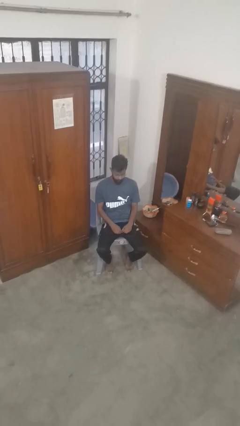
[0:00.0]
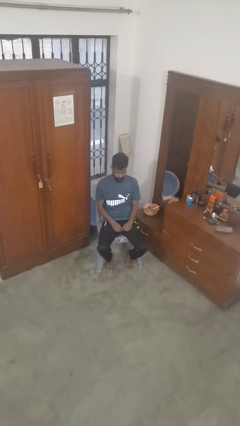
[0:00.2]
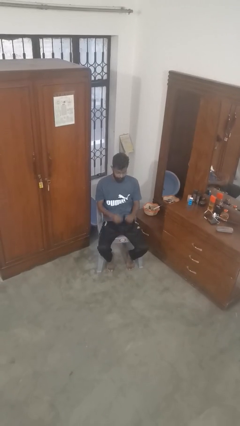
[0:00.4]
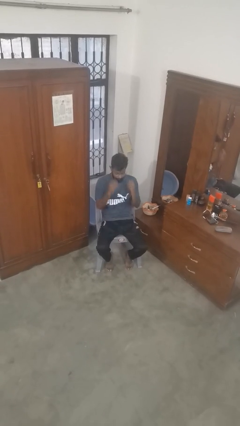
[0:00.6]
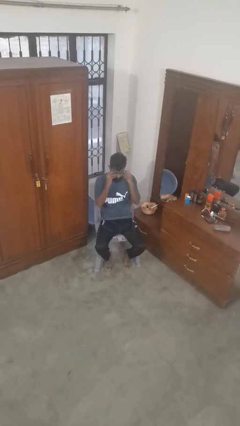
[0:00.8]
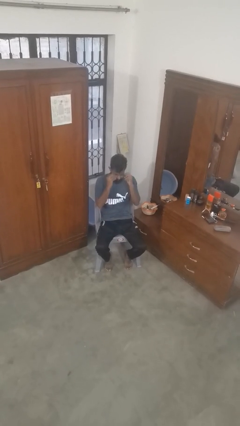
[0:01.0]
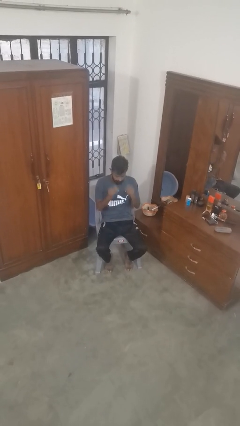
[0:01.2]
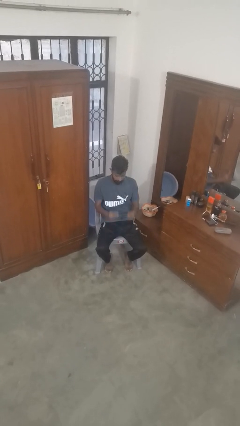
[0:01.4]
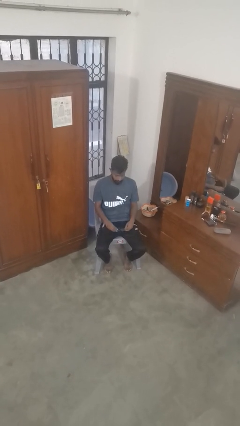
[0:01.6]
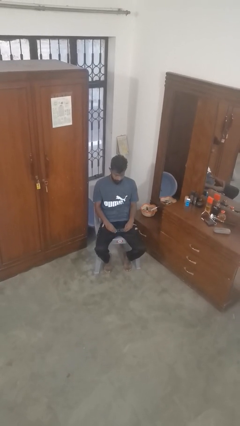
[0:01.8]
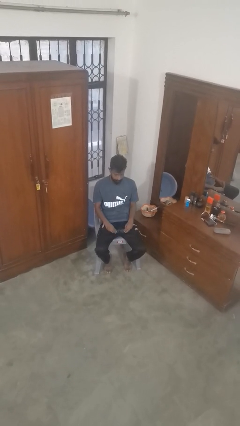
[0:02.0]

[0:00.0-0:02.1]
person takes off glasses

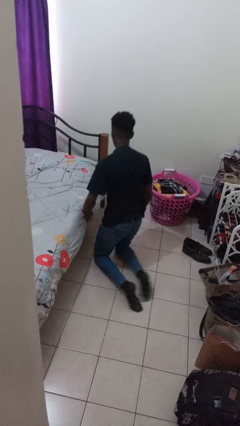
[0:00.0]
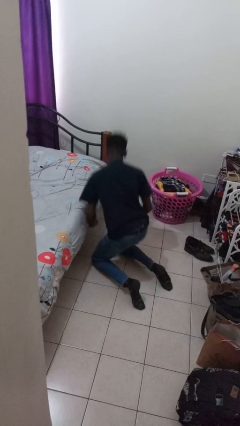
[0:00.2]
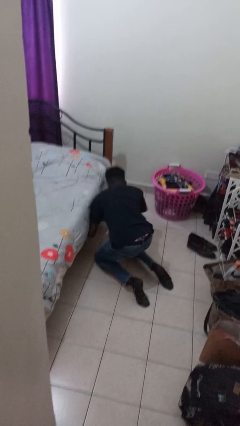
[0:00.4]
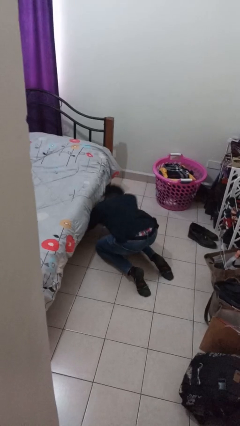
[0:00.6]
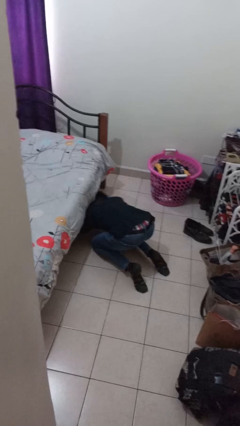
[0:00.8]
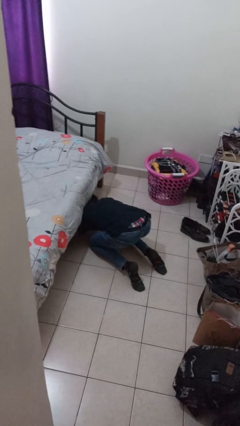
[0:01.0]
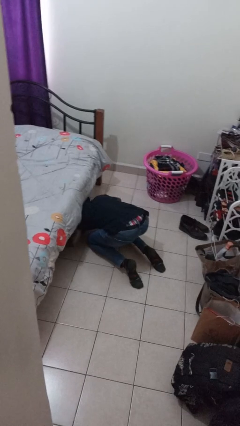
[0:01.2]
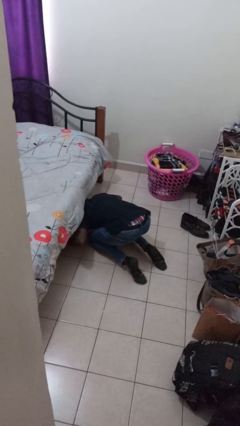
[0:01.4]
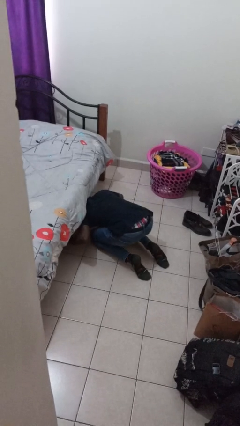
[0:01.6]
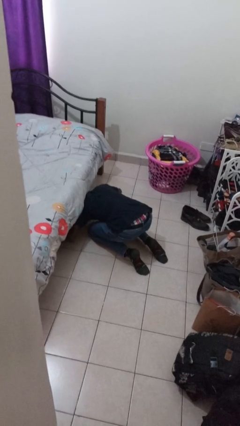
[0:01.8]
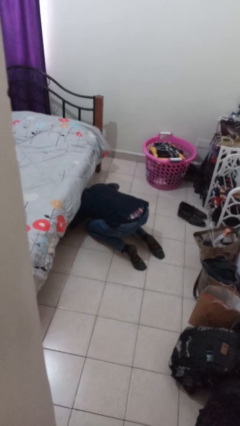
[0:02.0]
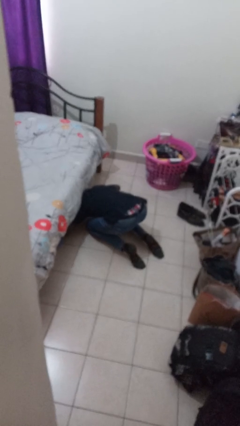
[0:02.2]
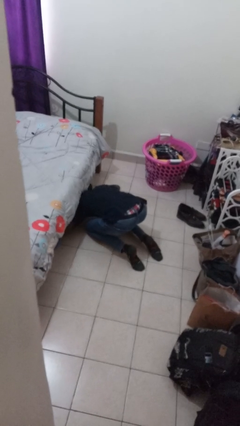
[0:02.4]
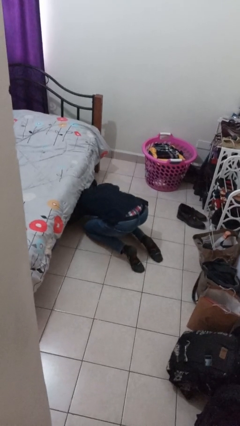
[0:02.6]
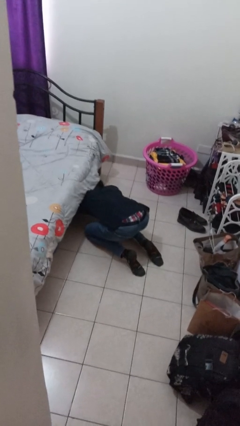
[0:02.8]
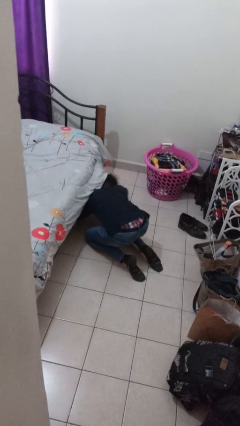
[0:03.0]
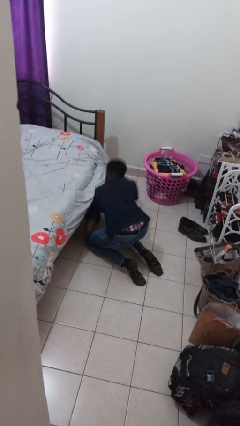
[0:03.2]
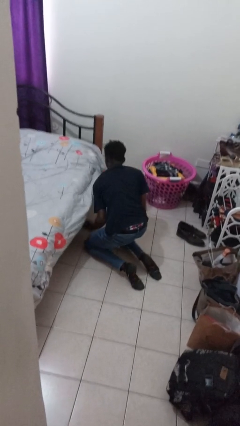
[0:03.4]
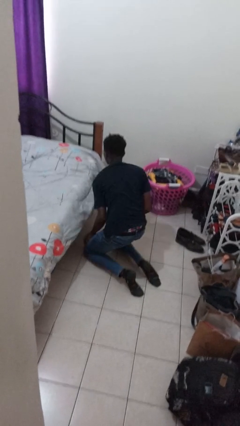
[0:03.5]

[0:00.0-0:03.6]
person searches under bed

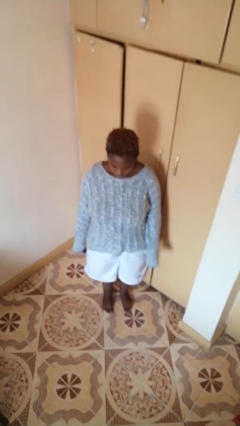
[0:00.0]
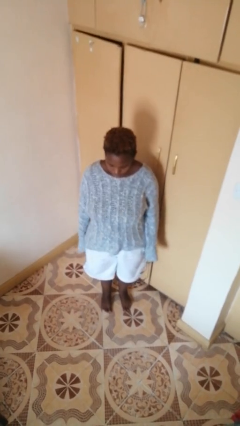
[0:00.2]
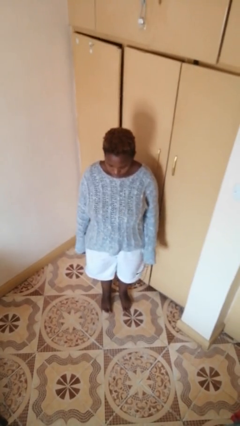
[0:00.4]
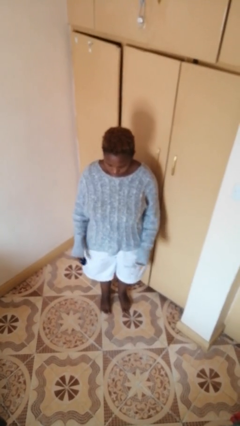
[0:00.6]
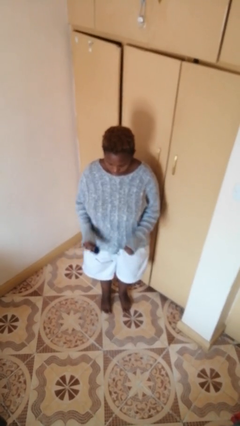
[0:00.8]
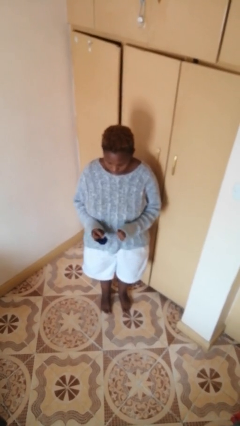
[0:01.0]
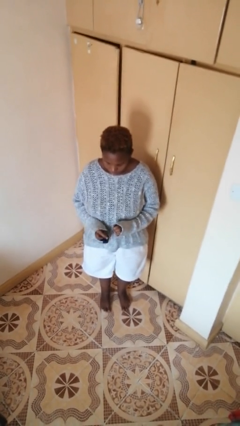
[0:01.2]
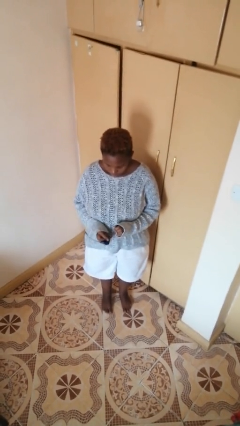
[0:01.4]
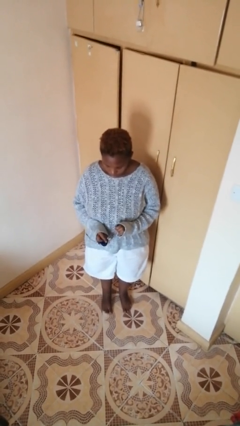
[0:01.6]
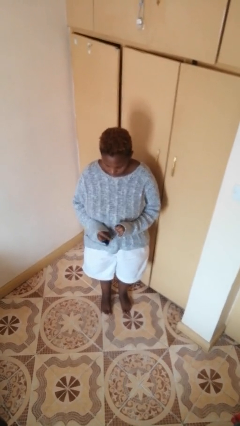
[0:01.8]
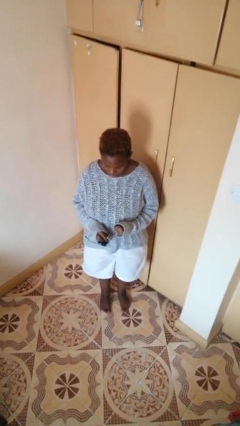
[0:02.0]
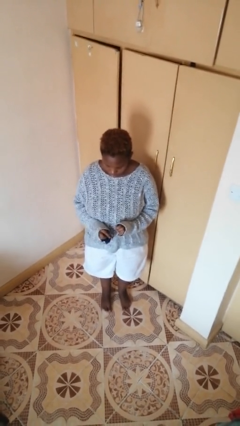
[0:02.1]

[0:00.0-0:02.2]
person cleans eyeglasses

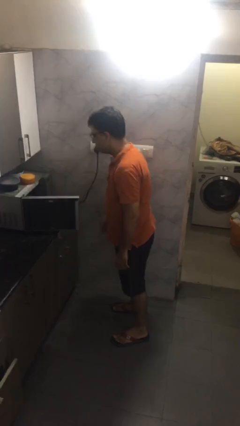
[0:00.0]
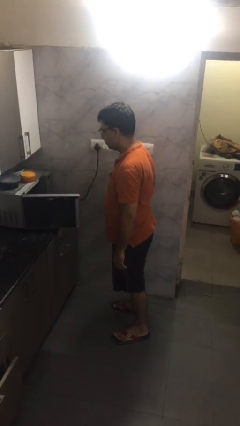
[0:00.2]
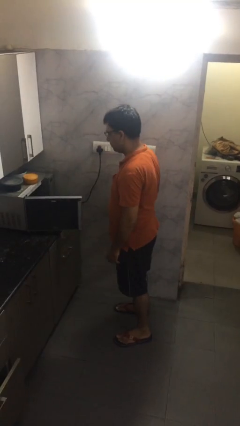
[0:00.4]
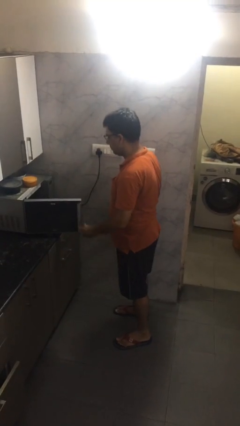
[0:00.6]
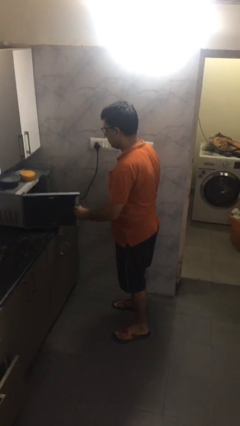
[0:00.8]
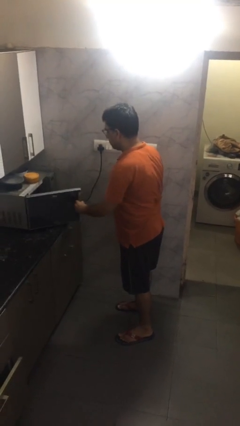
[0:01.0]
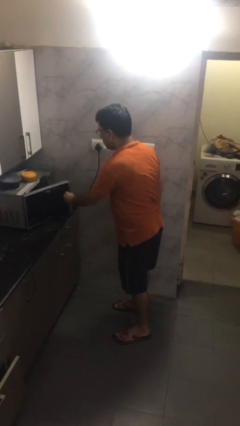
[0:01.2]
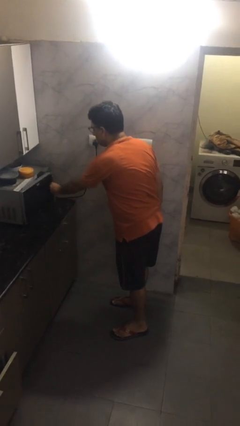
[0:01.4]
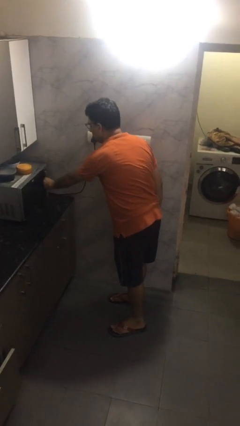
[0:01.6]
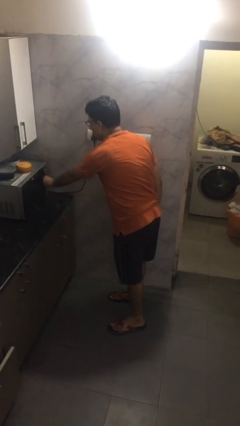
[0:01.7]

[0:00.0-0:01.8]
person closes microwave

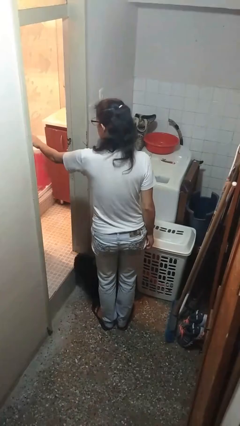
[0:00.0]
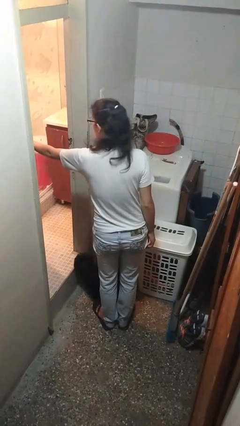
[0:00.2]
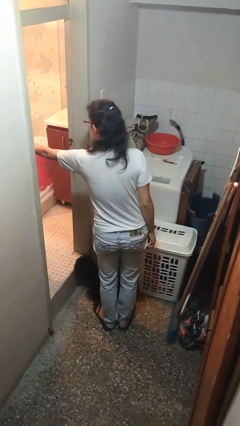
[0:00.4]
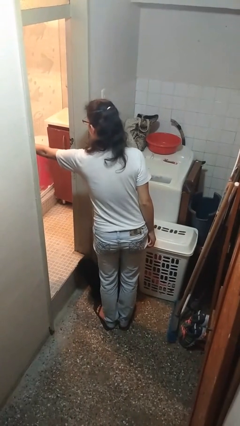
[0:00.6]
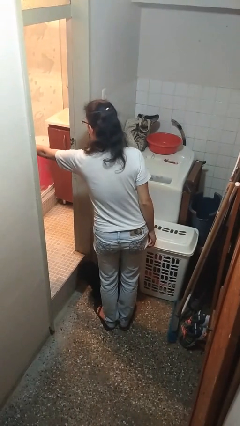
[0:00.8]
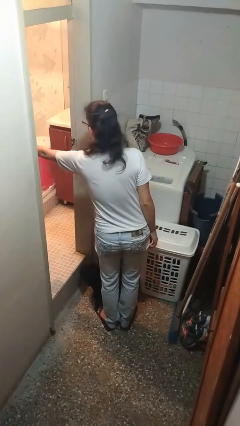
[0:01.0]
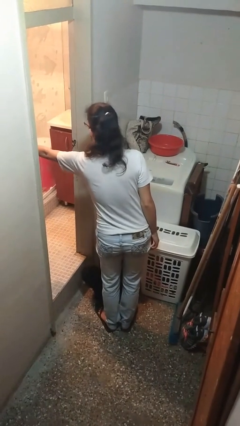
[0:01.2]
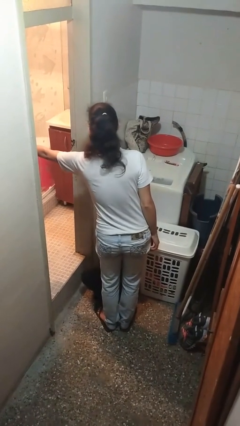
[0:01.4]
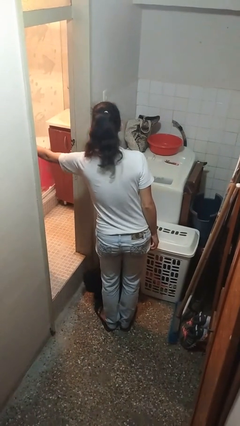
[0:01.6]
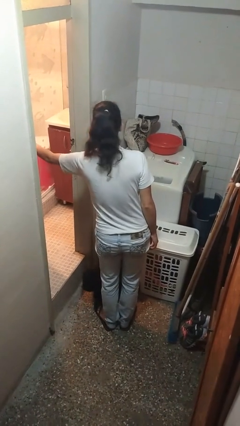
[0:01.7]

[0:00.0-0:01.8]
person opens facility door

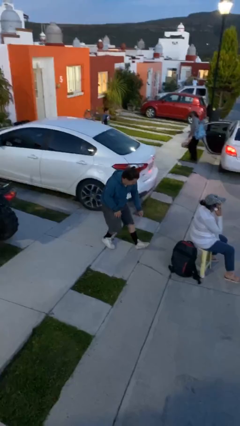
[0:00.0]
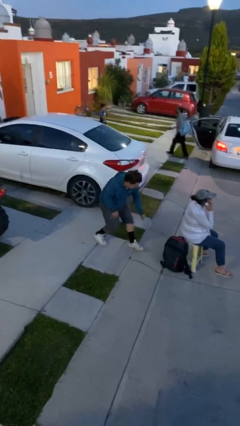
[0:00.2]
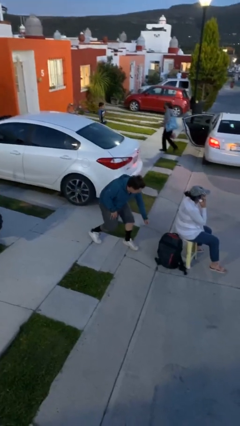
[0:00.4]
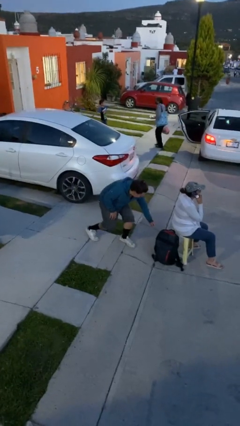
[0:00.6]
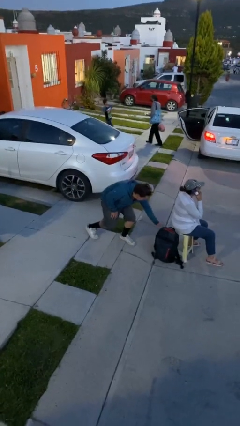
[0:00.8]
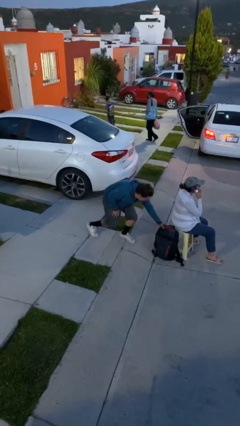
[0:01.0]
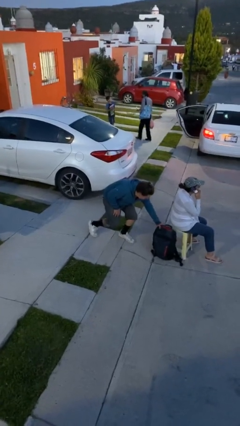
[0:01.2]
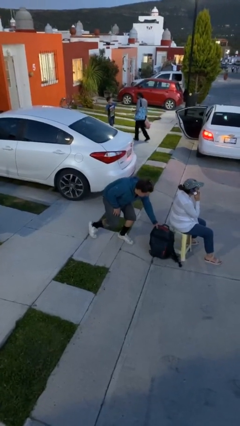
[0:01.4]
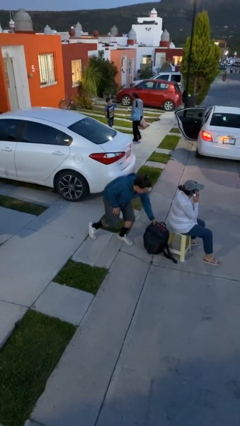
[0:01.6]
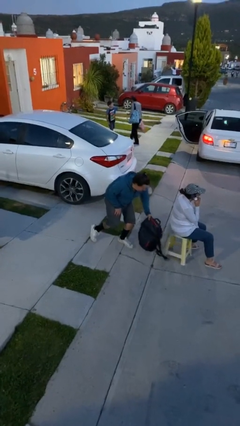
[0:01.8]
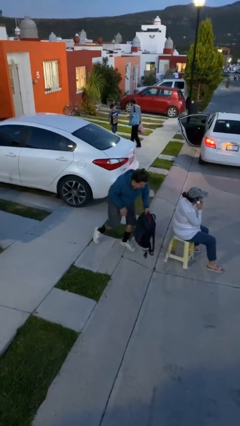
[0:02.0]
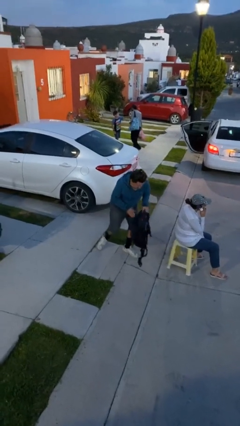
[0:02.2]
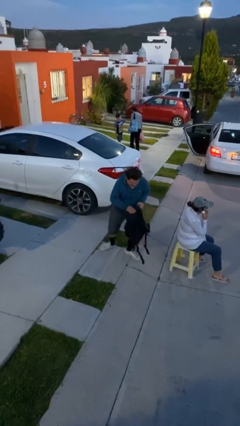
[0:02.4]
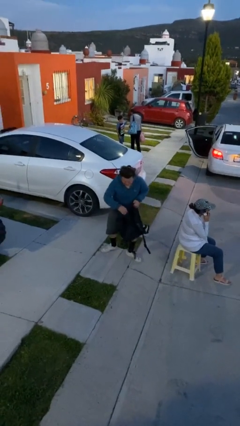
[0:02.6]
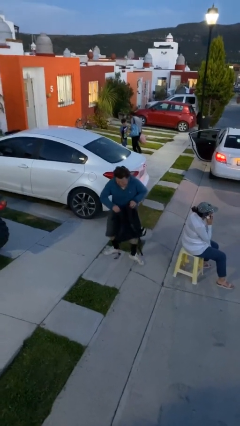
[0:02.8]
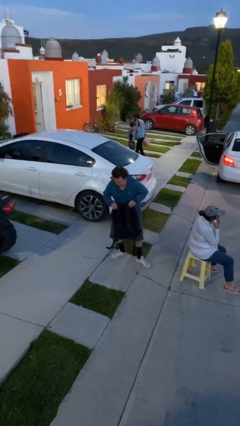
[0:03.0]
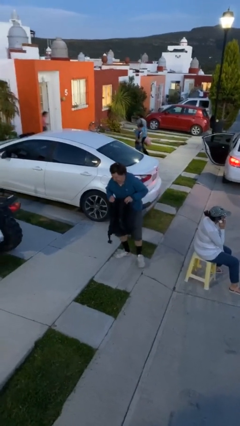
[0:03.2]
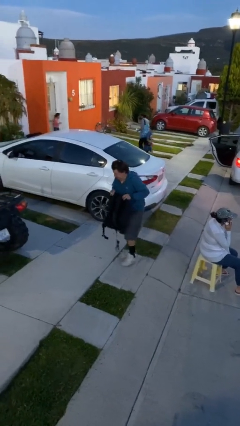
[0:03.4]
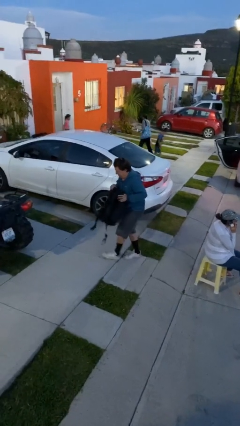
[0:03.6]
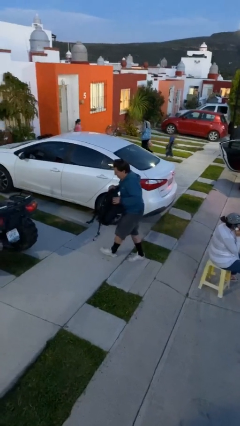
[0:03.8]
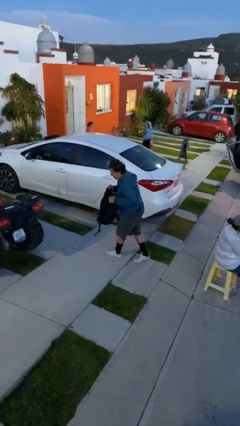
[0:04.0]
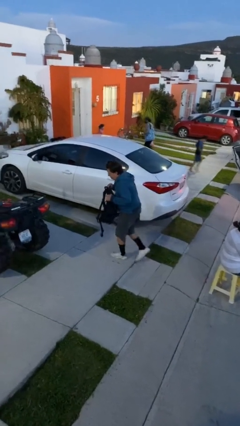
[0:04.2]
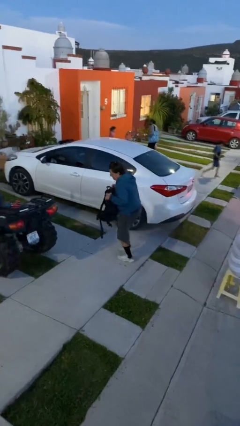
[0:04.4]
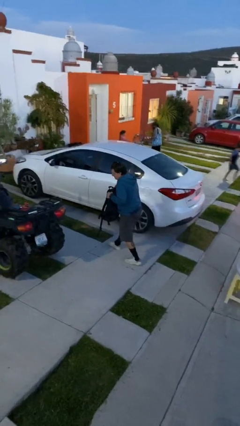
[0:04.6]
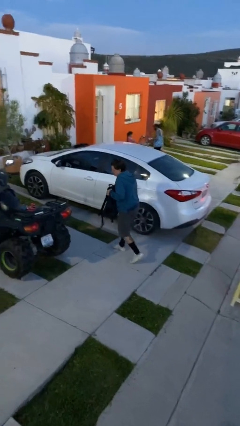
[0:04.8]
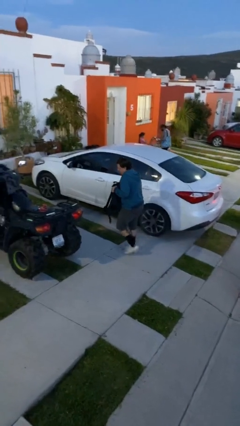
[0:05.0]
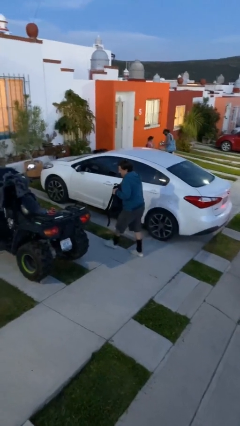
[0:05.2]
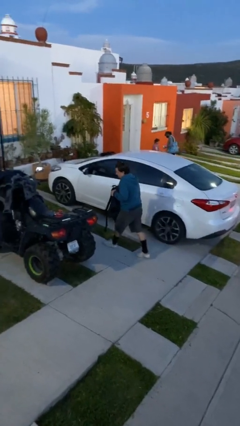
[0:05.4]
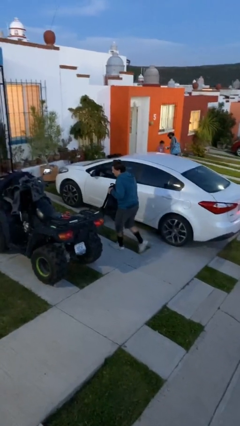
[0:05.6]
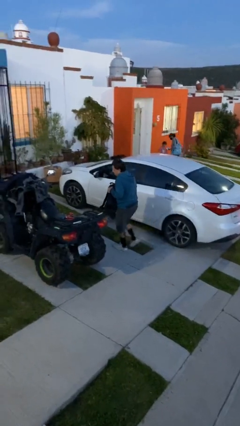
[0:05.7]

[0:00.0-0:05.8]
person steals object from person

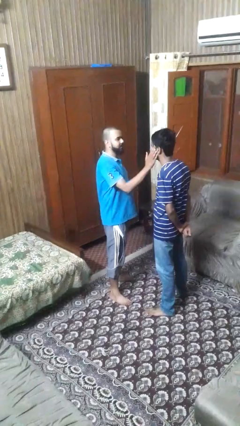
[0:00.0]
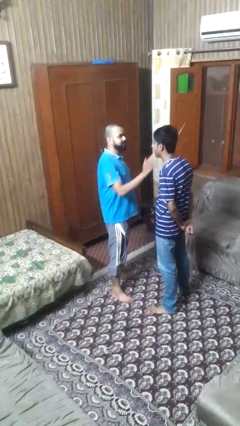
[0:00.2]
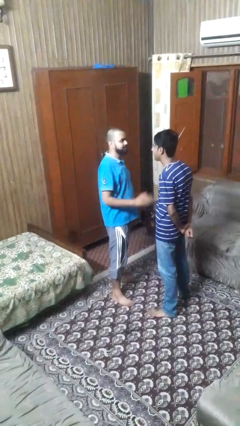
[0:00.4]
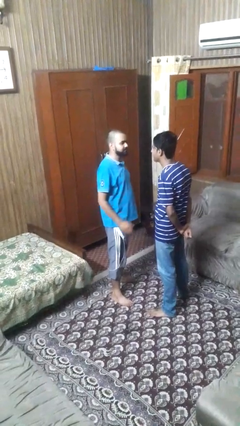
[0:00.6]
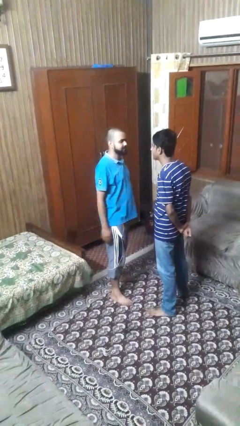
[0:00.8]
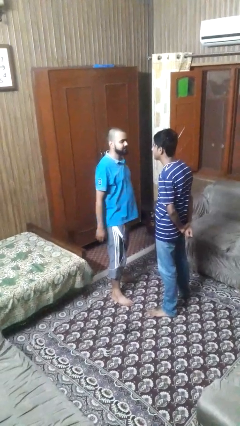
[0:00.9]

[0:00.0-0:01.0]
person touches face of person
